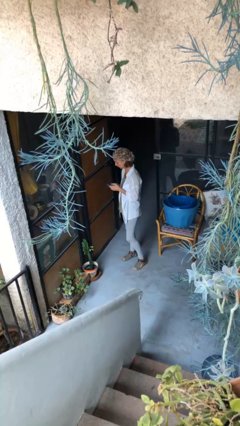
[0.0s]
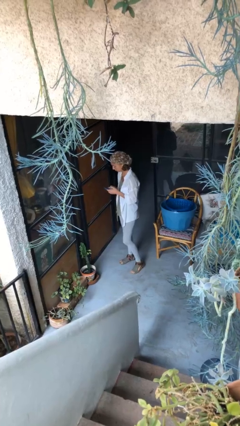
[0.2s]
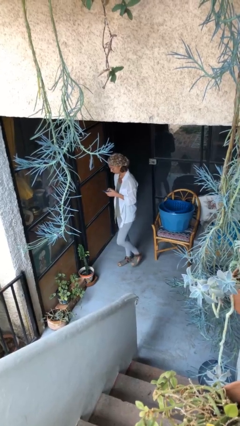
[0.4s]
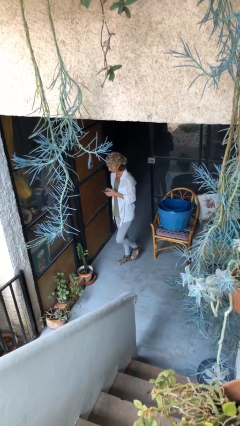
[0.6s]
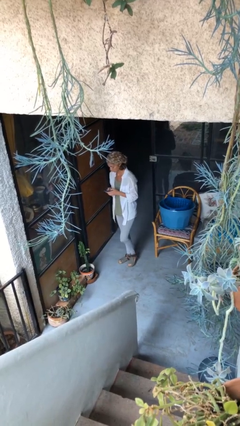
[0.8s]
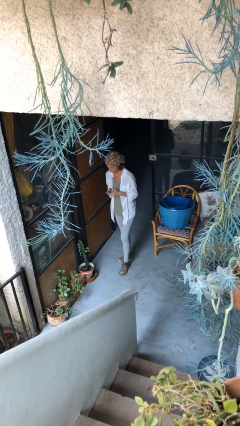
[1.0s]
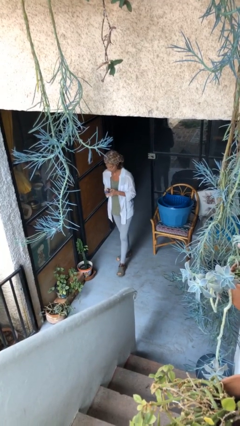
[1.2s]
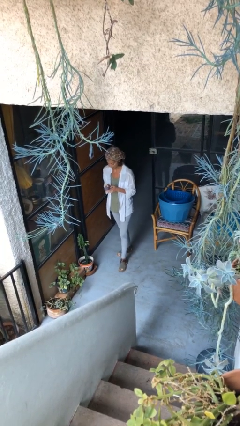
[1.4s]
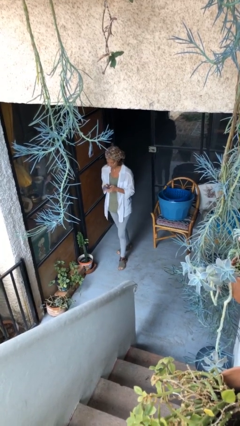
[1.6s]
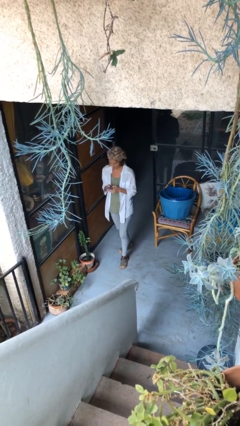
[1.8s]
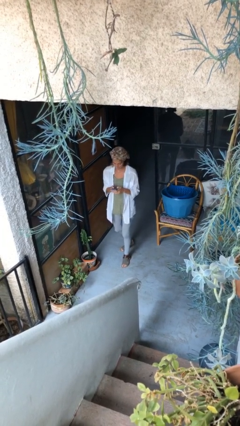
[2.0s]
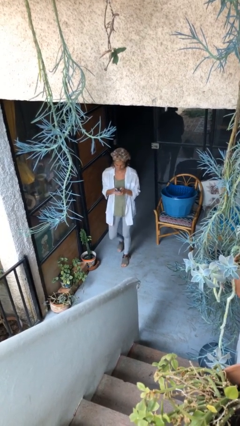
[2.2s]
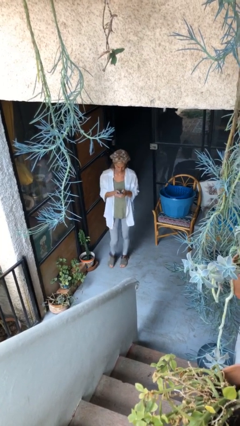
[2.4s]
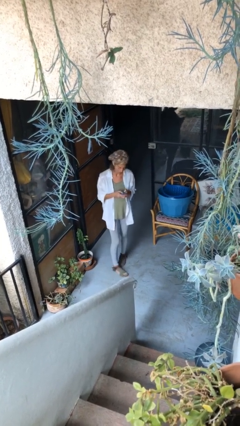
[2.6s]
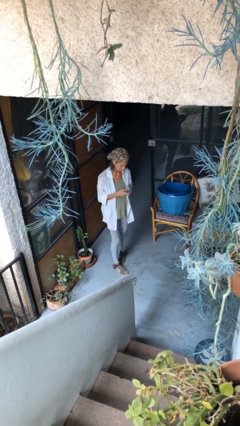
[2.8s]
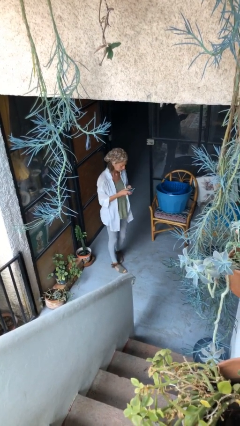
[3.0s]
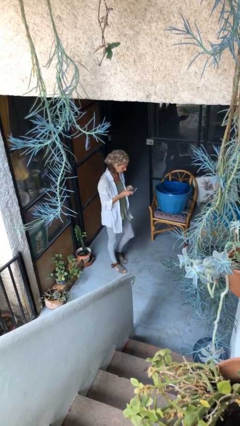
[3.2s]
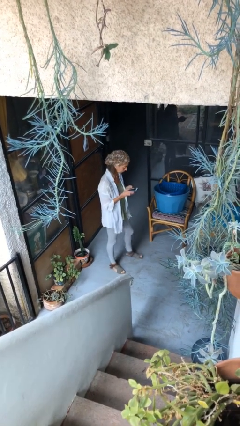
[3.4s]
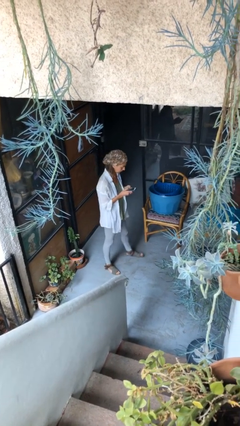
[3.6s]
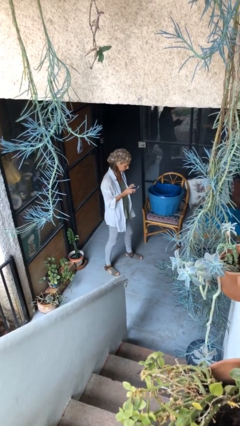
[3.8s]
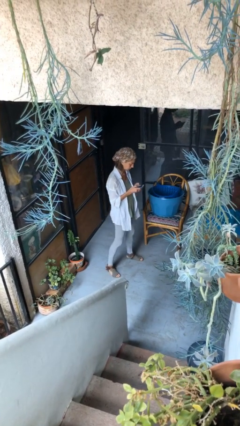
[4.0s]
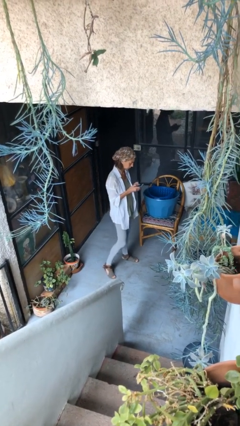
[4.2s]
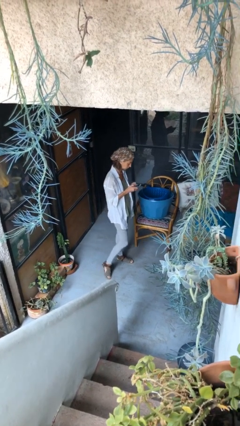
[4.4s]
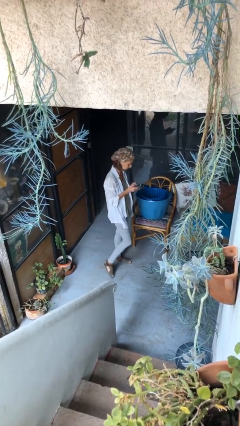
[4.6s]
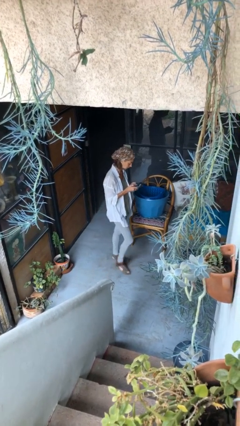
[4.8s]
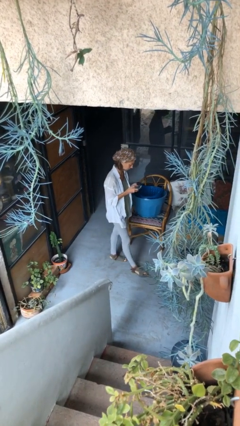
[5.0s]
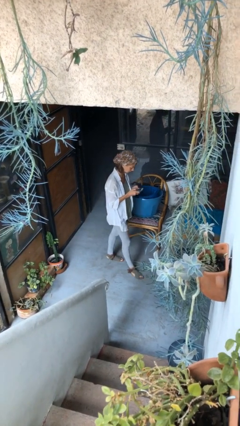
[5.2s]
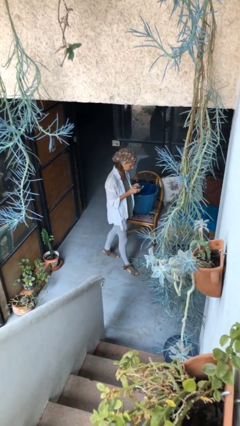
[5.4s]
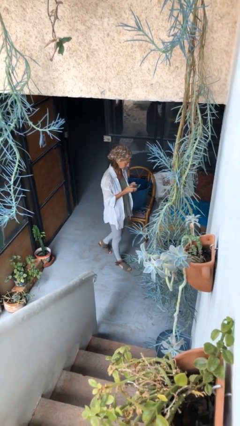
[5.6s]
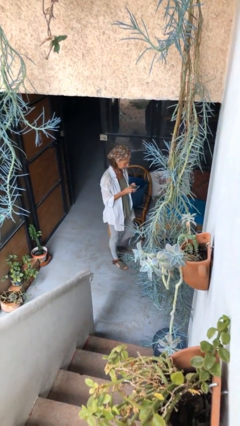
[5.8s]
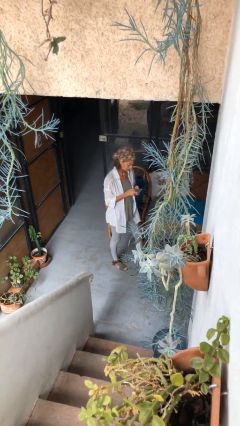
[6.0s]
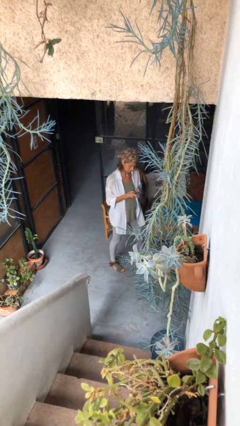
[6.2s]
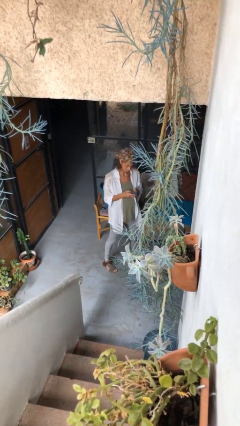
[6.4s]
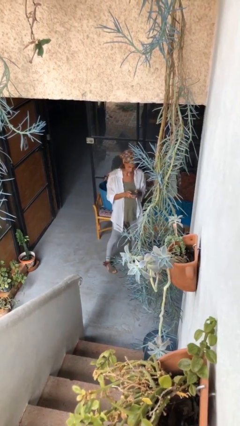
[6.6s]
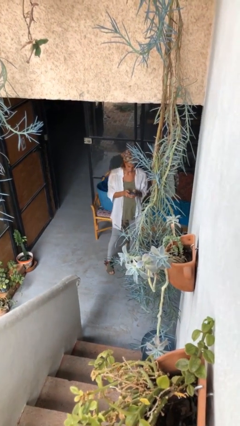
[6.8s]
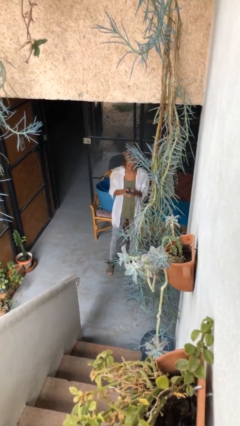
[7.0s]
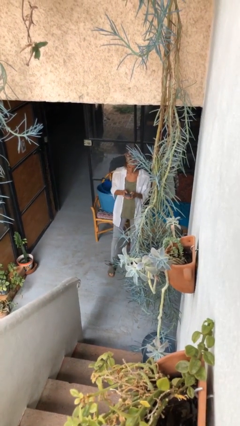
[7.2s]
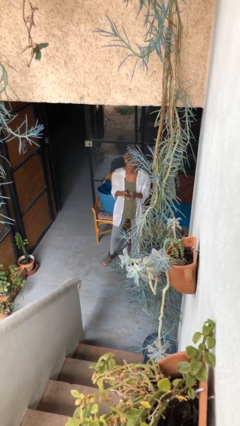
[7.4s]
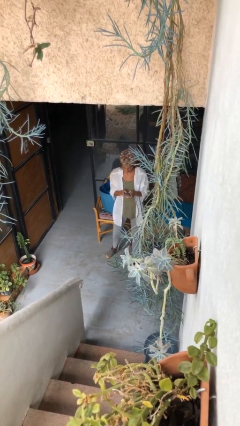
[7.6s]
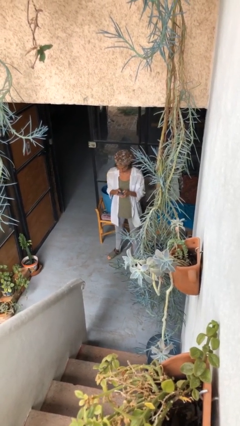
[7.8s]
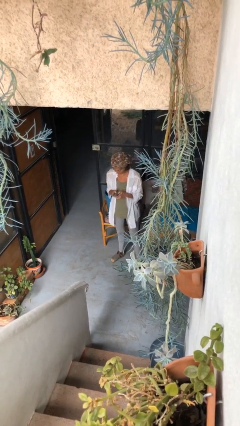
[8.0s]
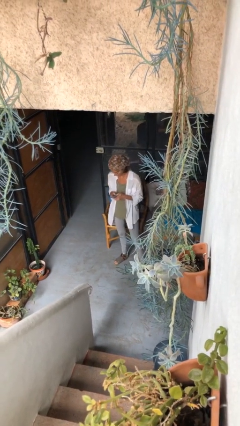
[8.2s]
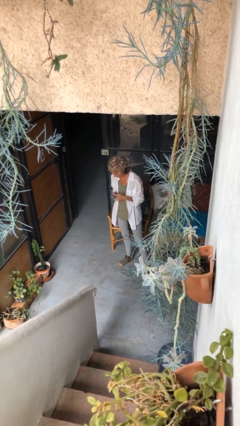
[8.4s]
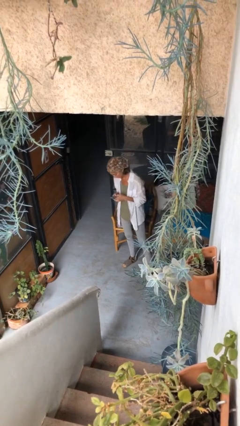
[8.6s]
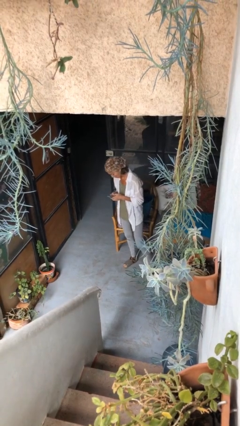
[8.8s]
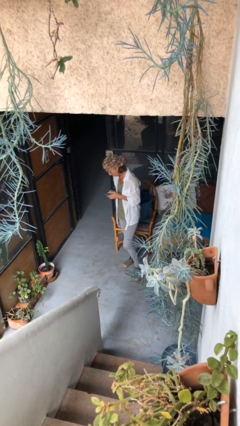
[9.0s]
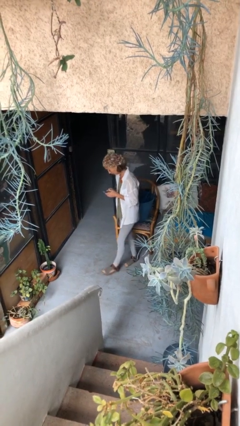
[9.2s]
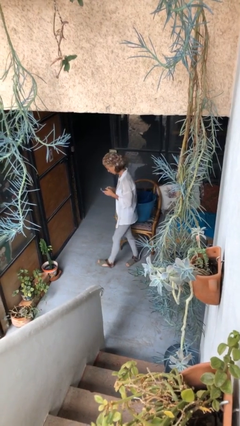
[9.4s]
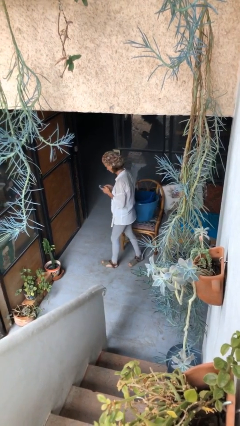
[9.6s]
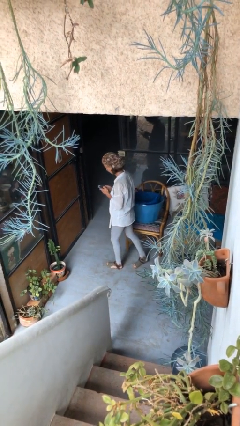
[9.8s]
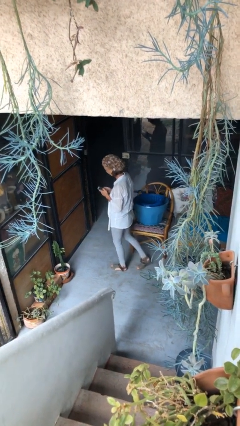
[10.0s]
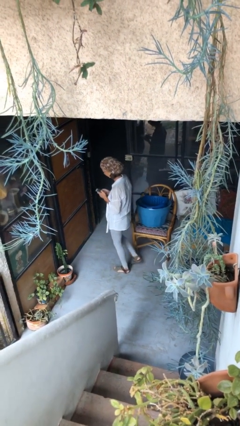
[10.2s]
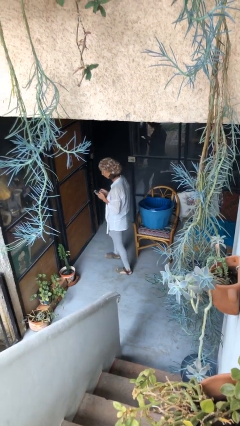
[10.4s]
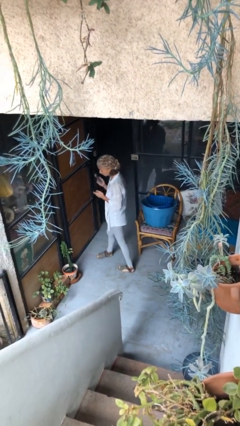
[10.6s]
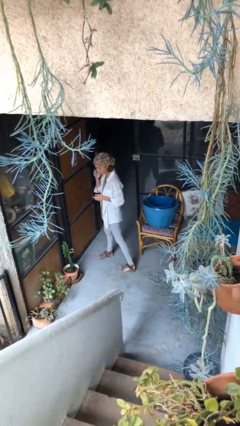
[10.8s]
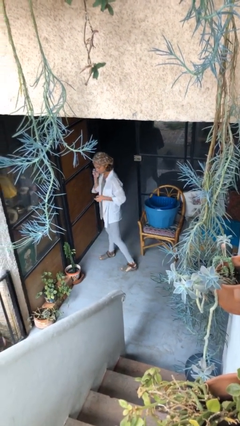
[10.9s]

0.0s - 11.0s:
person texts on phone

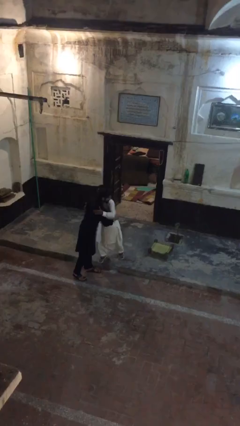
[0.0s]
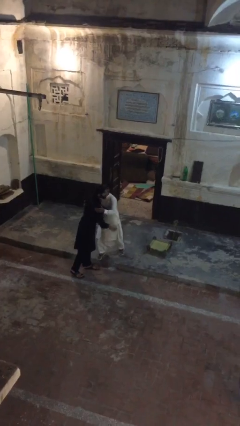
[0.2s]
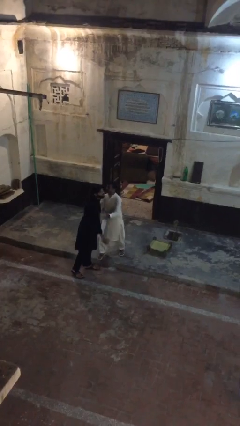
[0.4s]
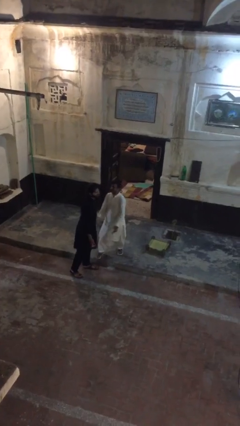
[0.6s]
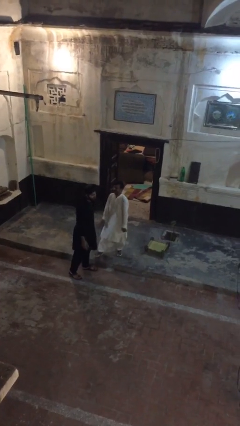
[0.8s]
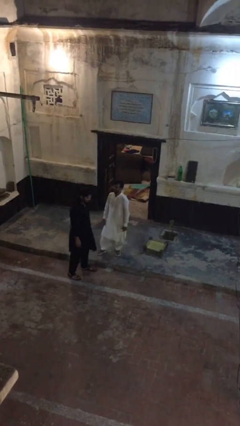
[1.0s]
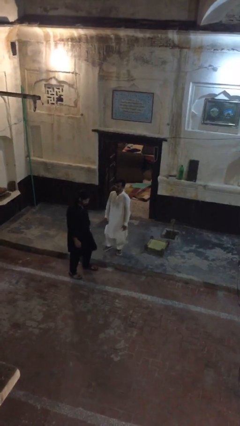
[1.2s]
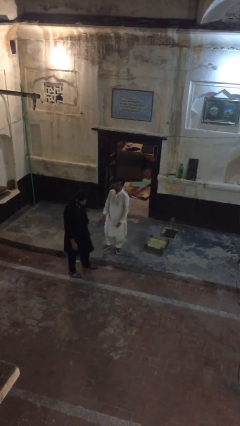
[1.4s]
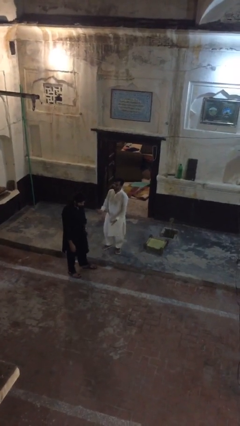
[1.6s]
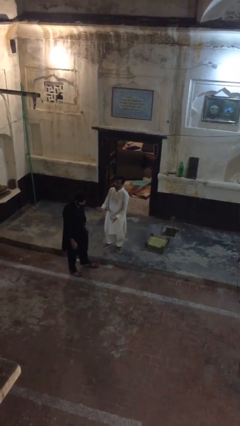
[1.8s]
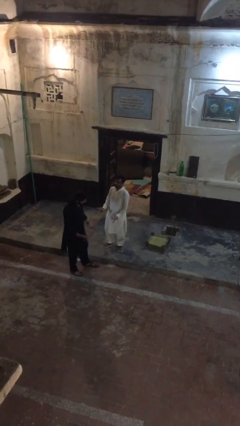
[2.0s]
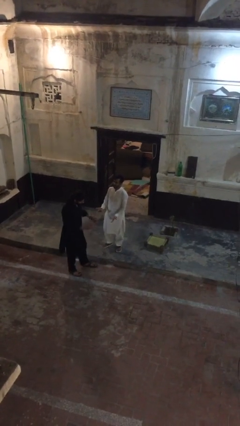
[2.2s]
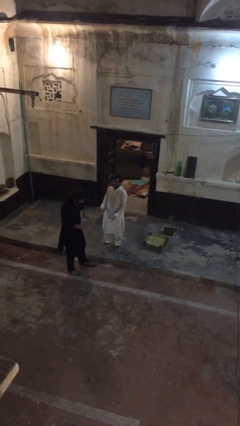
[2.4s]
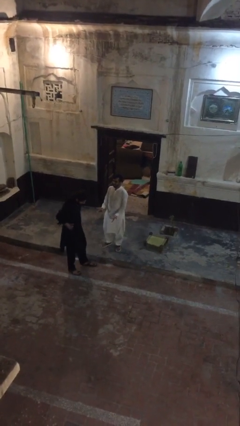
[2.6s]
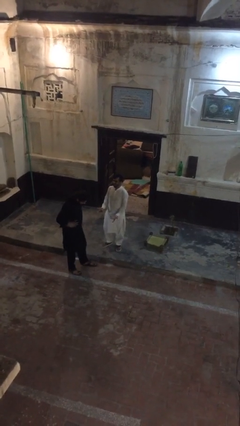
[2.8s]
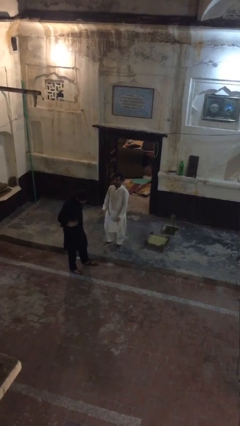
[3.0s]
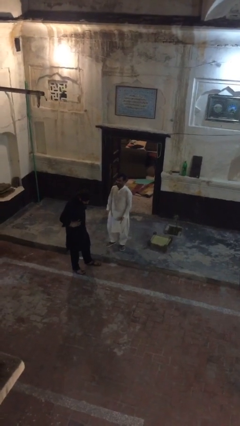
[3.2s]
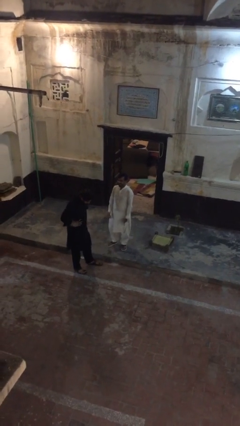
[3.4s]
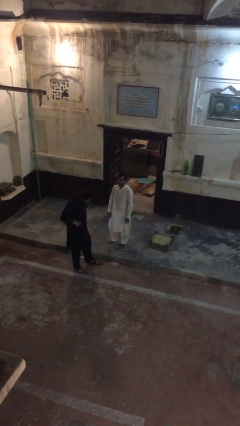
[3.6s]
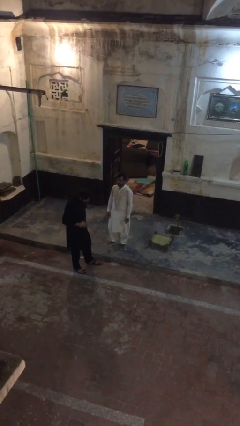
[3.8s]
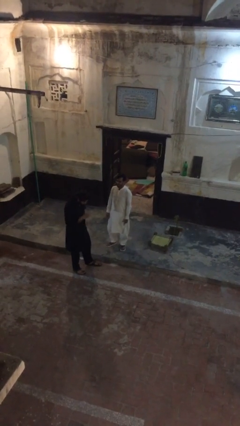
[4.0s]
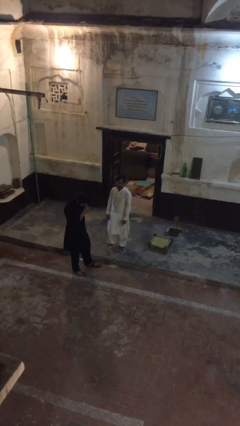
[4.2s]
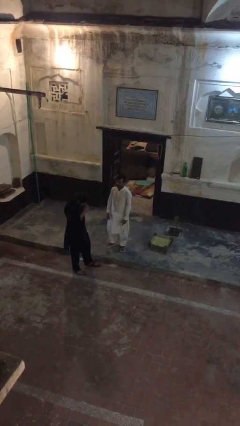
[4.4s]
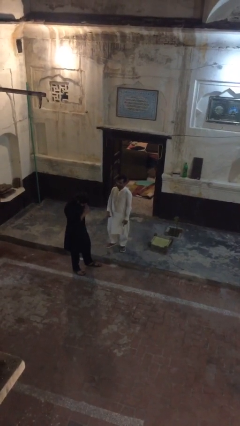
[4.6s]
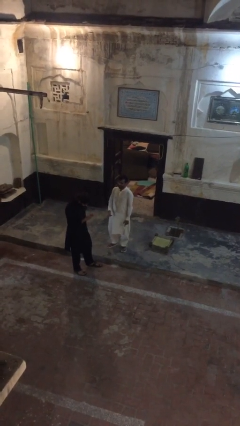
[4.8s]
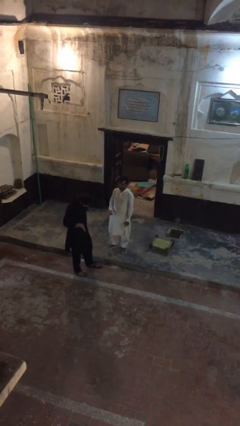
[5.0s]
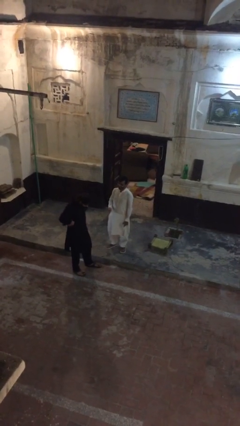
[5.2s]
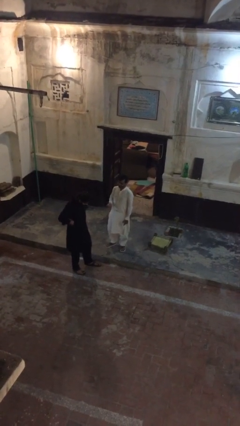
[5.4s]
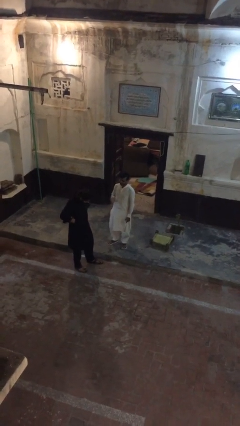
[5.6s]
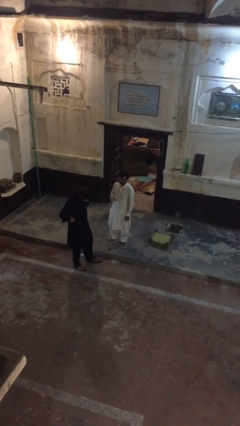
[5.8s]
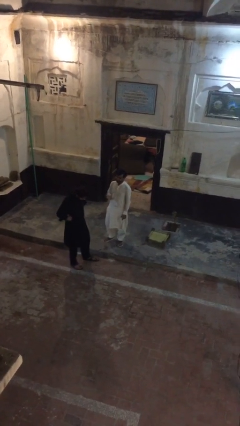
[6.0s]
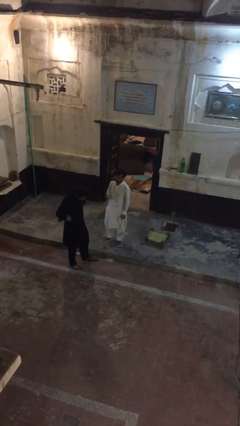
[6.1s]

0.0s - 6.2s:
person talks to person

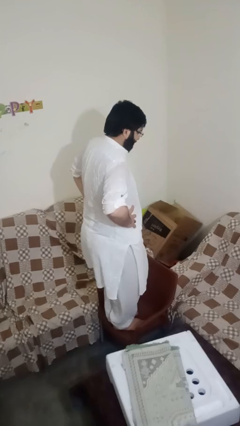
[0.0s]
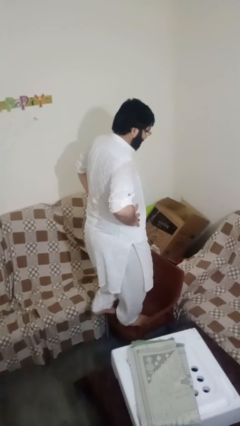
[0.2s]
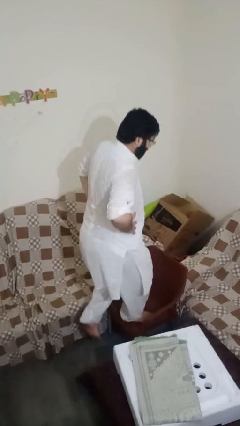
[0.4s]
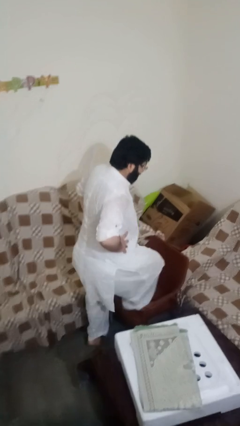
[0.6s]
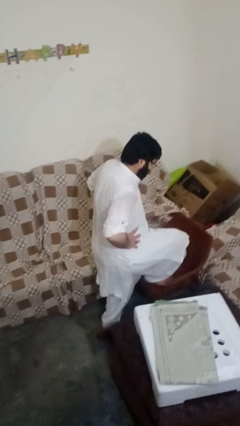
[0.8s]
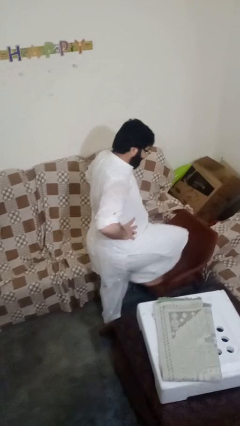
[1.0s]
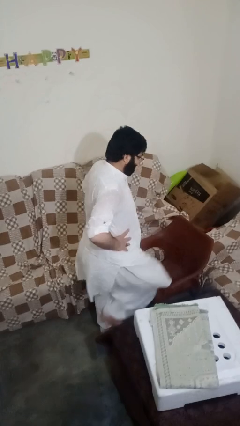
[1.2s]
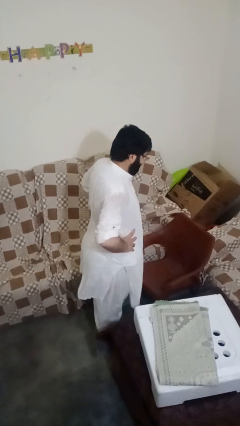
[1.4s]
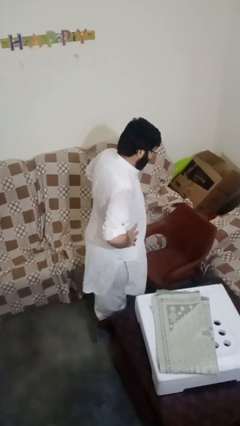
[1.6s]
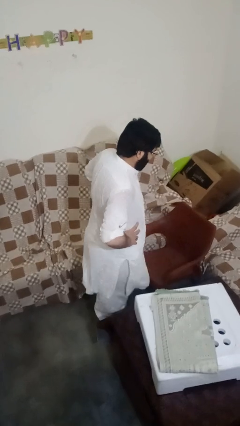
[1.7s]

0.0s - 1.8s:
person climbs off chair
